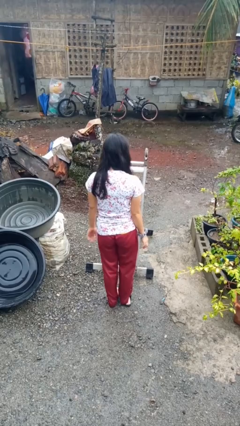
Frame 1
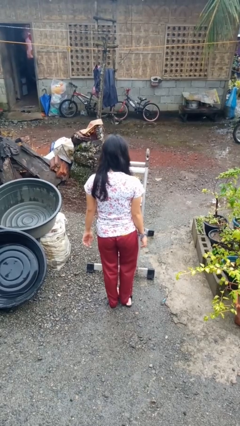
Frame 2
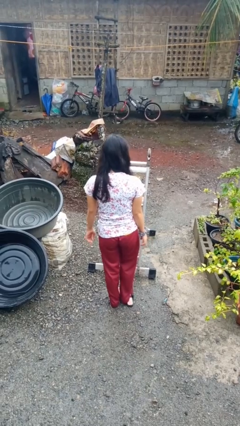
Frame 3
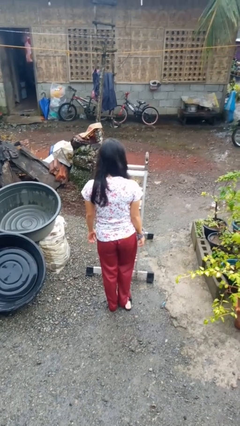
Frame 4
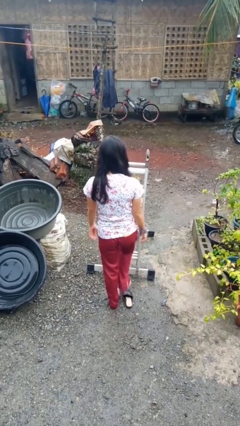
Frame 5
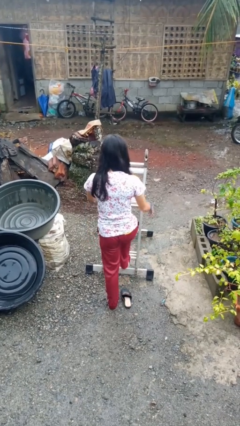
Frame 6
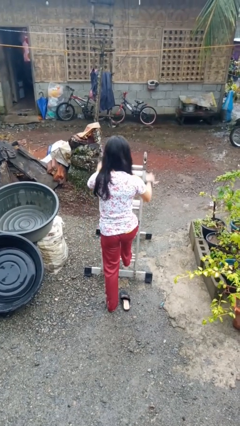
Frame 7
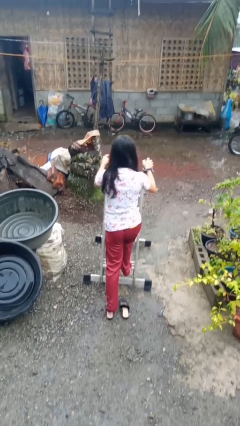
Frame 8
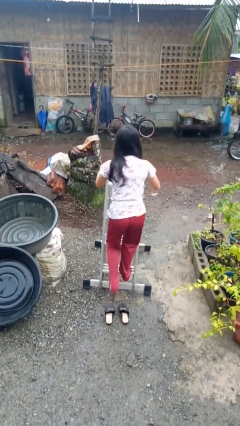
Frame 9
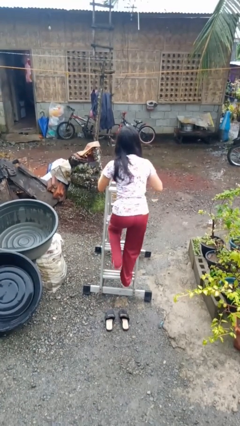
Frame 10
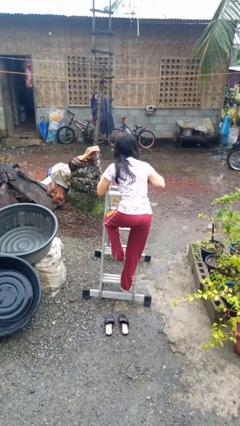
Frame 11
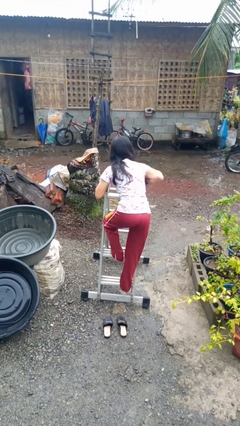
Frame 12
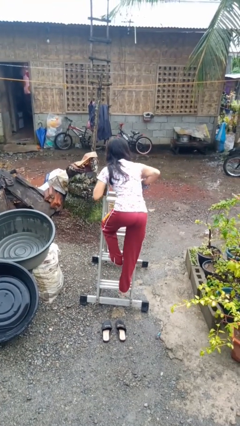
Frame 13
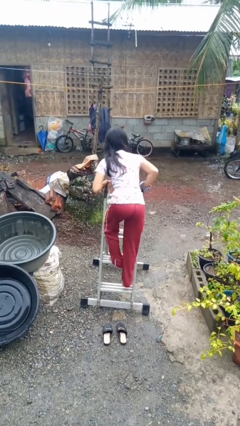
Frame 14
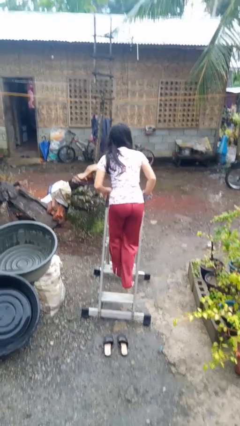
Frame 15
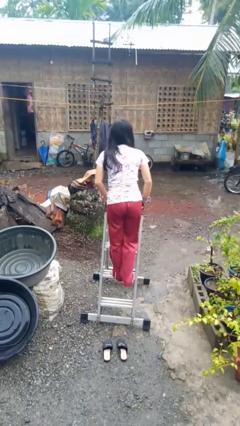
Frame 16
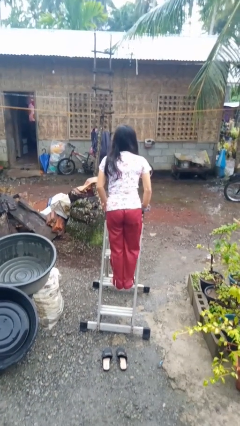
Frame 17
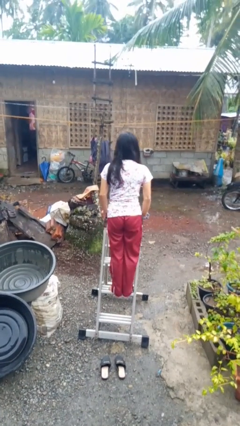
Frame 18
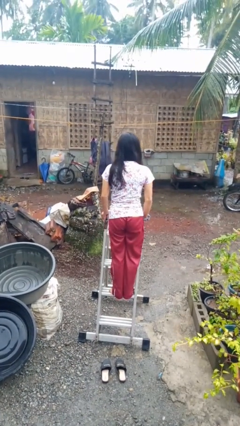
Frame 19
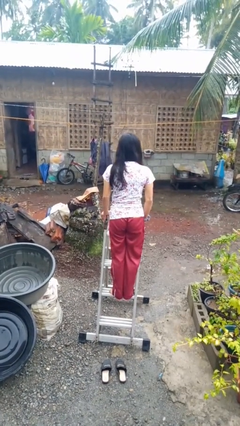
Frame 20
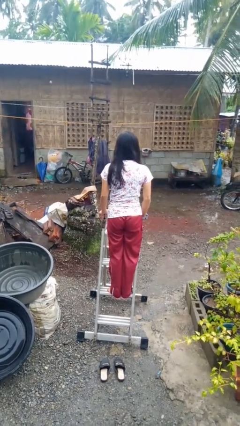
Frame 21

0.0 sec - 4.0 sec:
person climbs up ladder

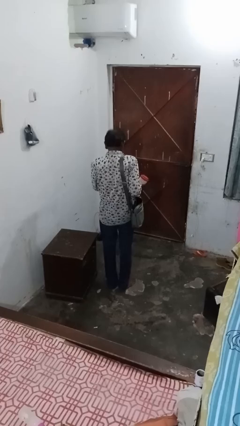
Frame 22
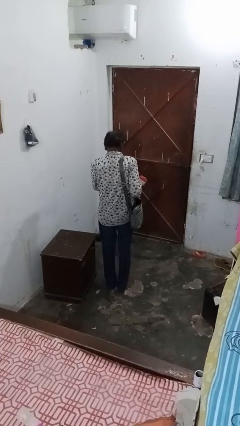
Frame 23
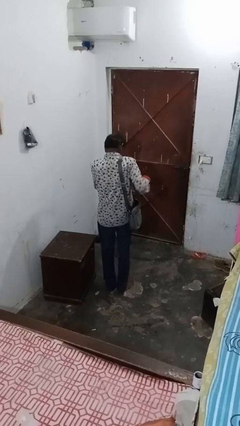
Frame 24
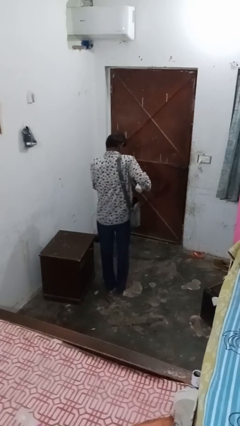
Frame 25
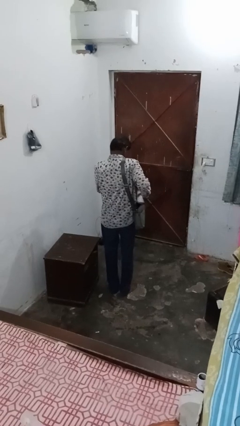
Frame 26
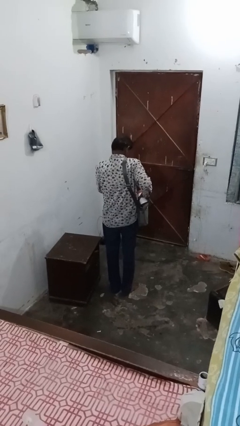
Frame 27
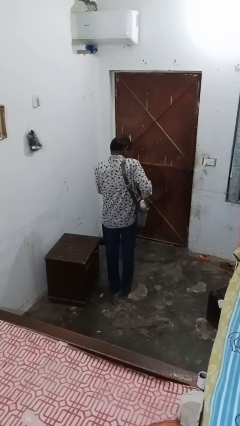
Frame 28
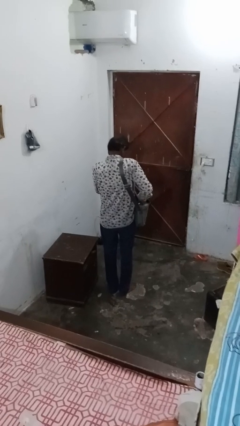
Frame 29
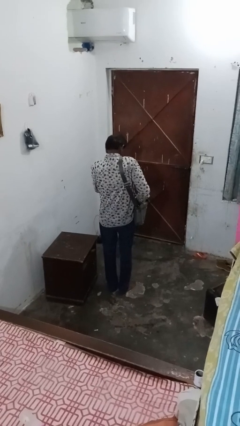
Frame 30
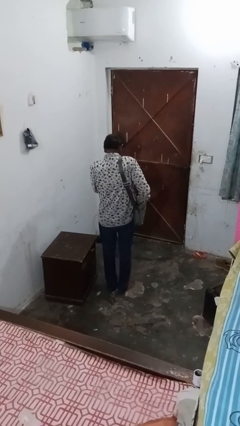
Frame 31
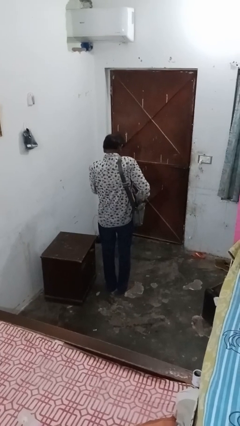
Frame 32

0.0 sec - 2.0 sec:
person puts object into bag

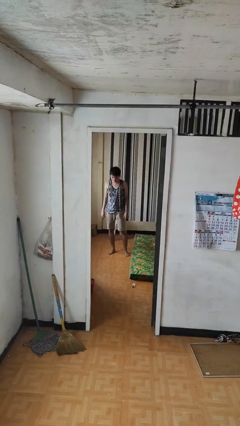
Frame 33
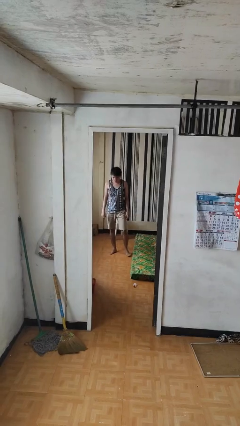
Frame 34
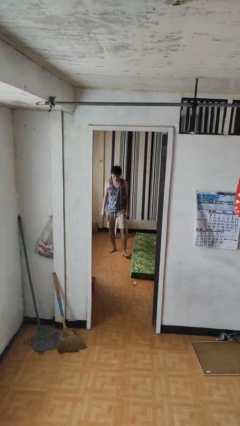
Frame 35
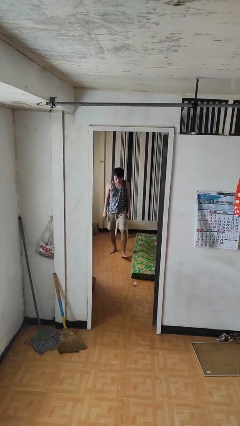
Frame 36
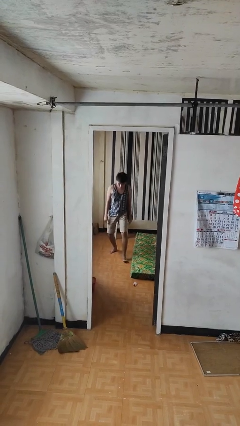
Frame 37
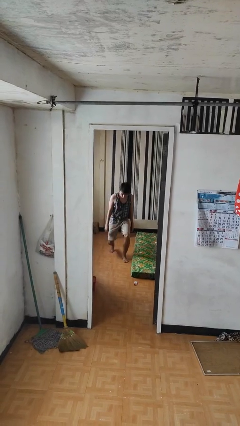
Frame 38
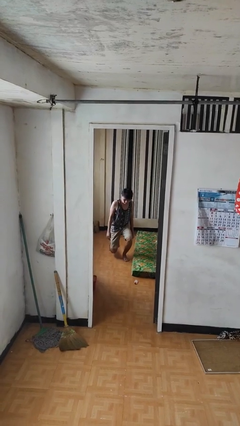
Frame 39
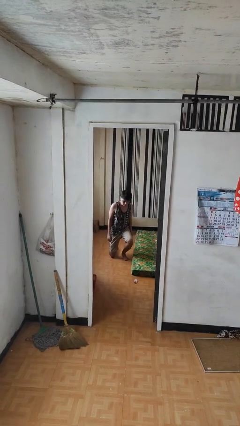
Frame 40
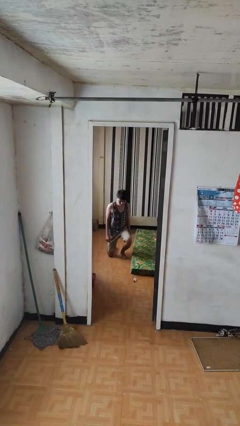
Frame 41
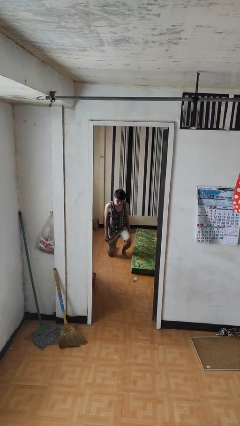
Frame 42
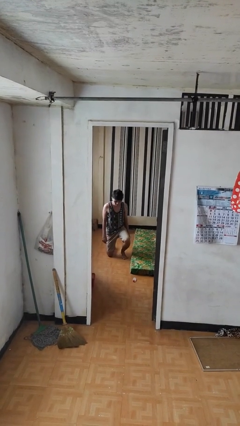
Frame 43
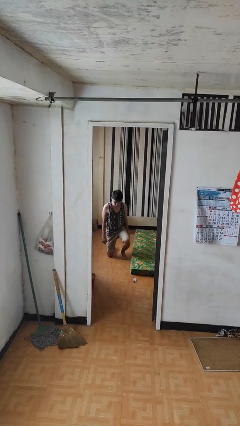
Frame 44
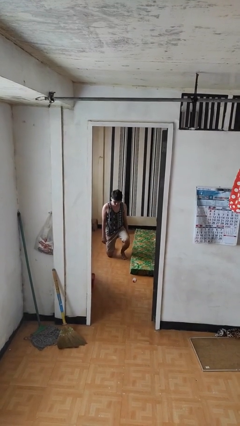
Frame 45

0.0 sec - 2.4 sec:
person kneels

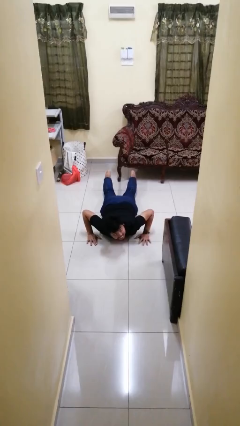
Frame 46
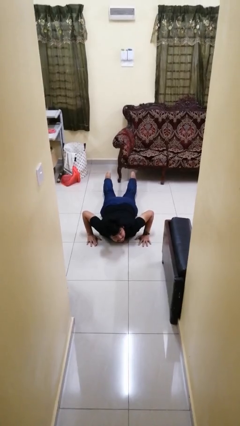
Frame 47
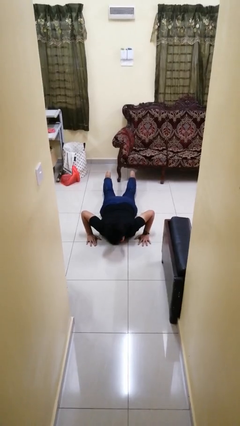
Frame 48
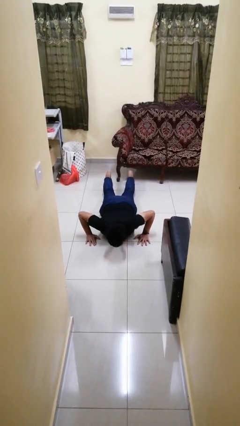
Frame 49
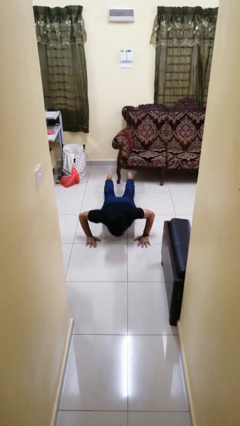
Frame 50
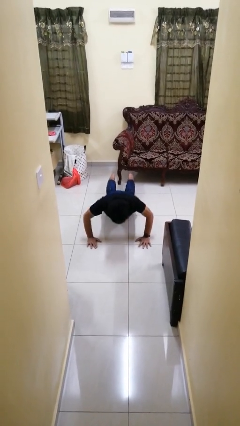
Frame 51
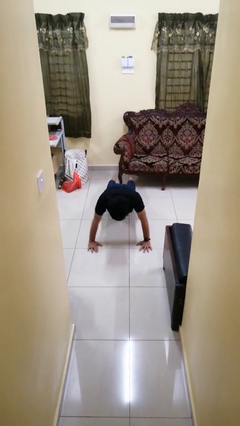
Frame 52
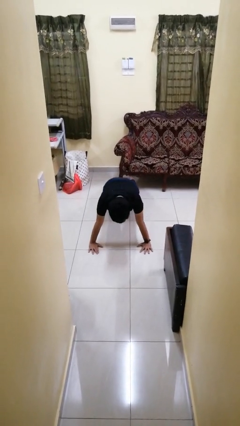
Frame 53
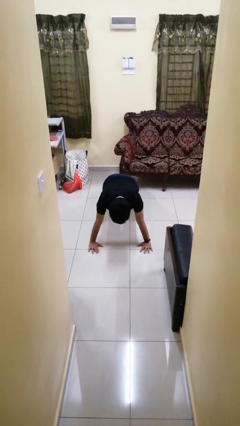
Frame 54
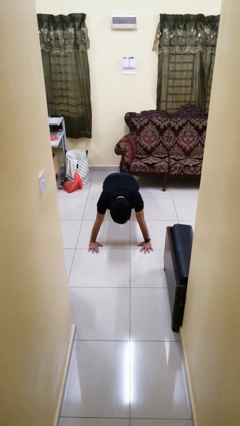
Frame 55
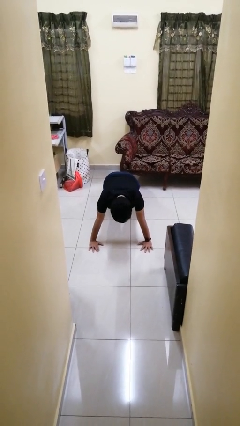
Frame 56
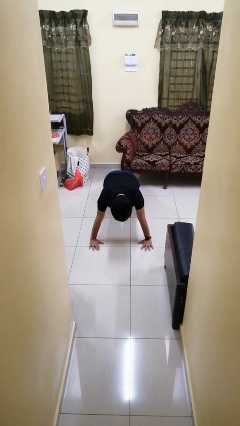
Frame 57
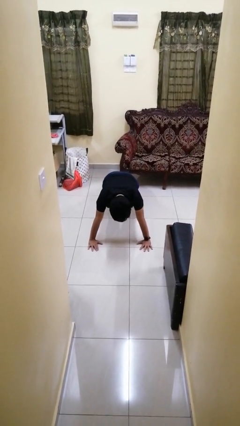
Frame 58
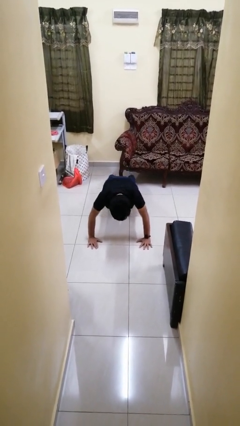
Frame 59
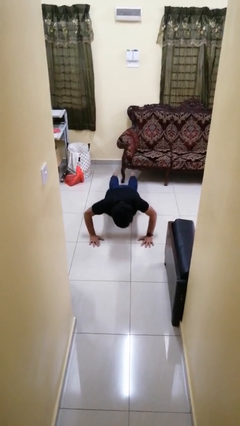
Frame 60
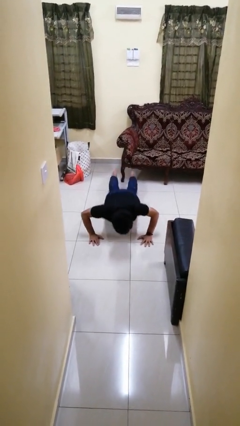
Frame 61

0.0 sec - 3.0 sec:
person exercises with pushup

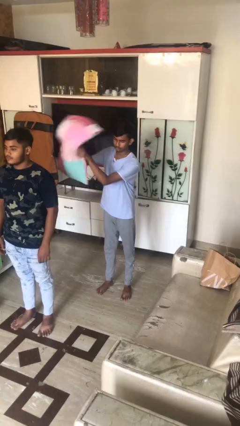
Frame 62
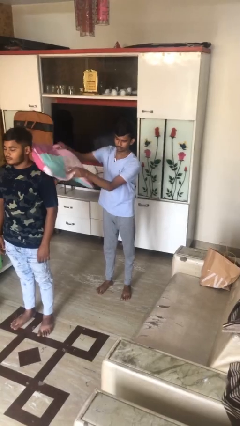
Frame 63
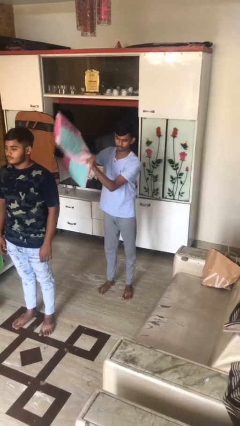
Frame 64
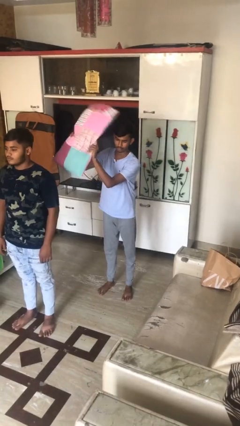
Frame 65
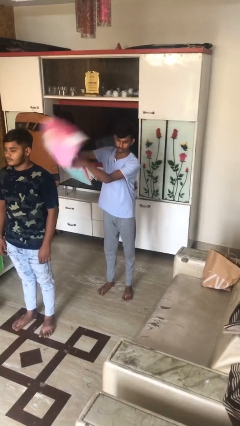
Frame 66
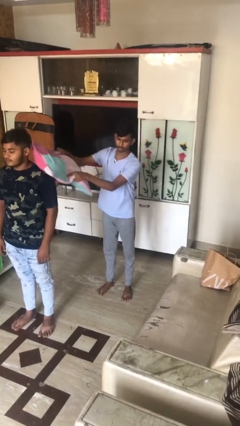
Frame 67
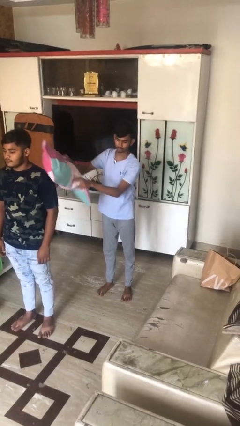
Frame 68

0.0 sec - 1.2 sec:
person hits person with pillow

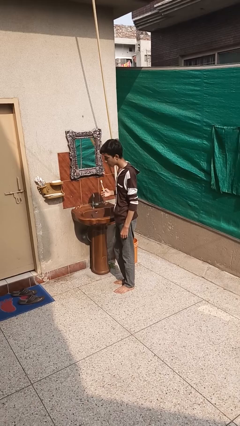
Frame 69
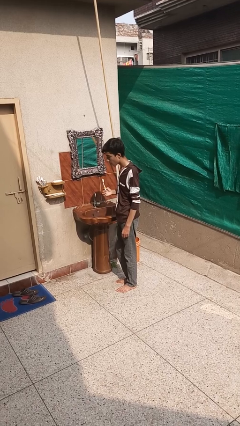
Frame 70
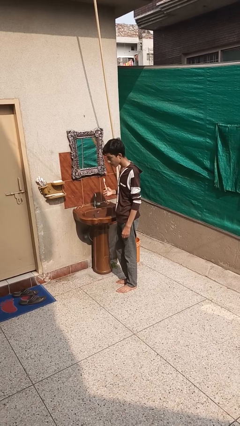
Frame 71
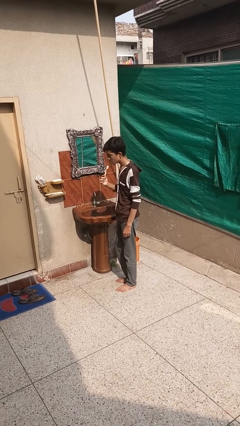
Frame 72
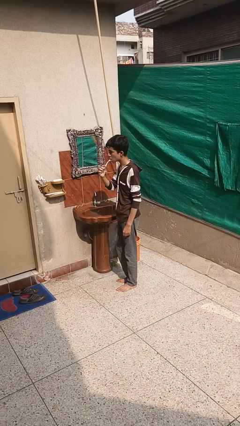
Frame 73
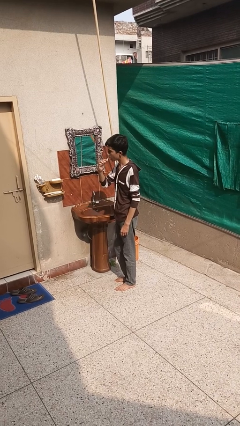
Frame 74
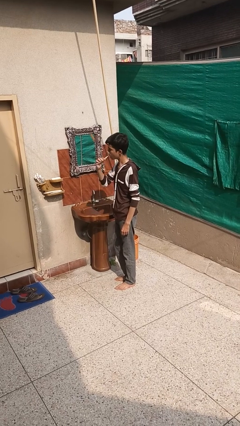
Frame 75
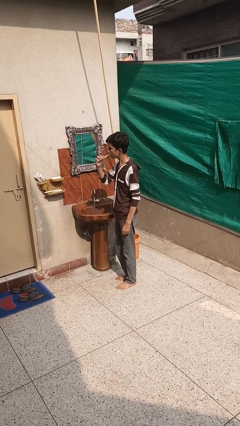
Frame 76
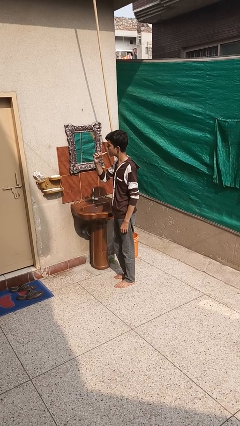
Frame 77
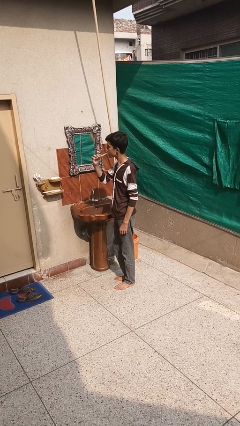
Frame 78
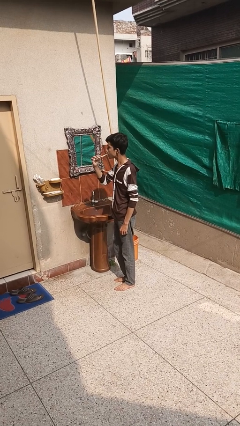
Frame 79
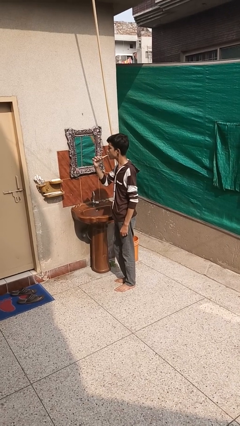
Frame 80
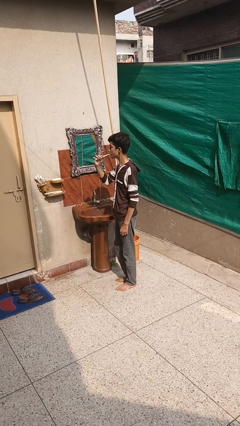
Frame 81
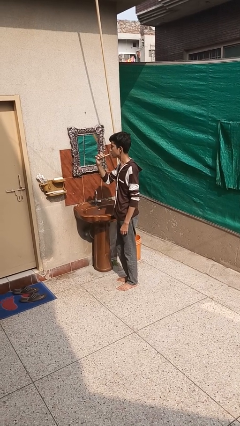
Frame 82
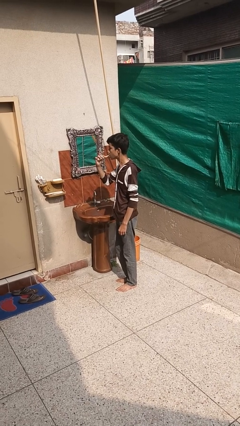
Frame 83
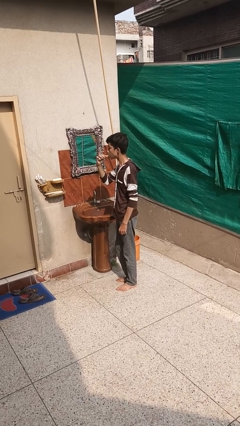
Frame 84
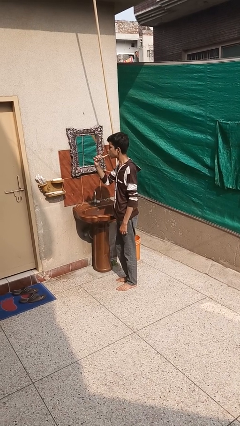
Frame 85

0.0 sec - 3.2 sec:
person brushes teeth

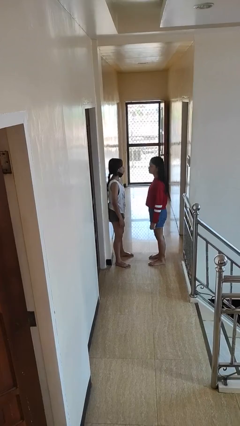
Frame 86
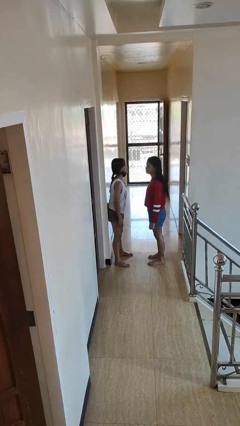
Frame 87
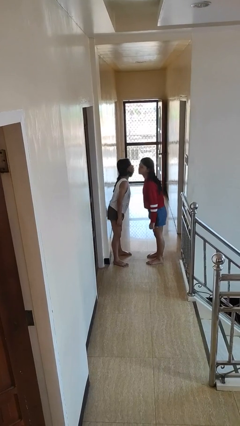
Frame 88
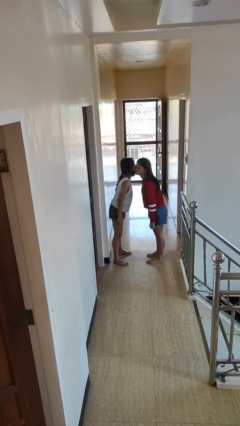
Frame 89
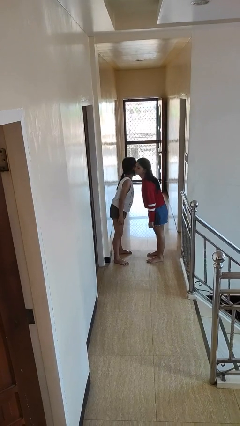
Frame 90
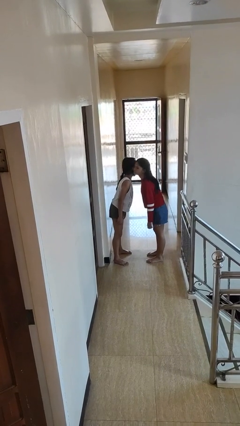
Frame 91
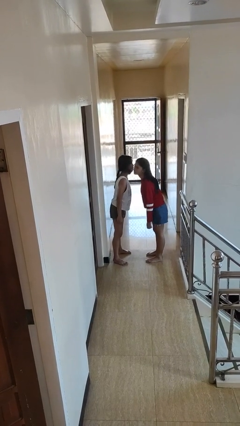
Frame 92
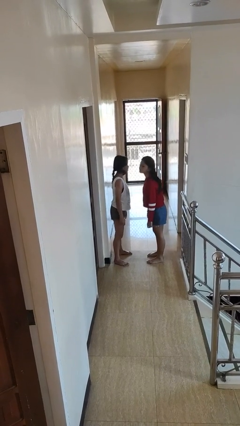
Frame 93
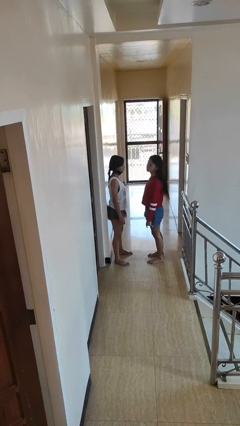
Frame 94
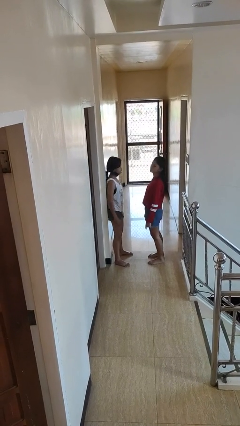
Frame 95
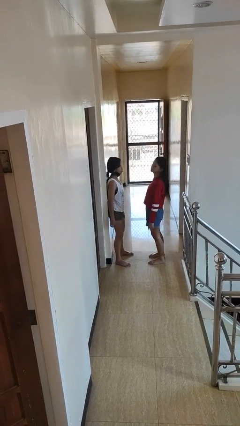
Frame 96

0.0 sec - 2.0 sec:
person kisses cheek of person
